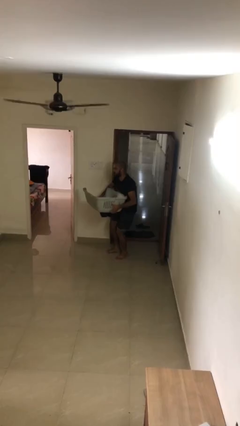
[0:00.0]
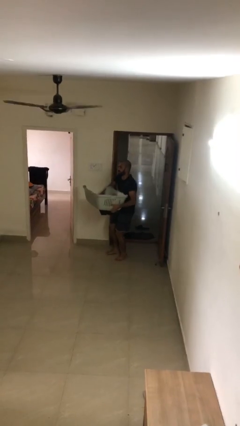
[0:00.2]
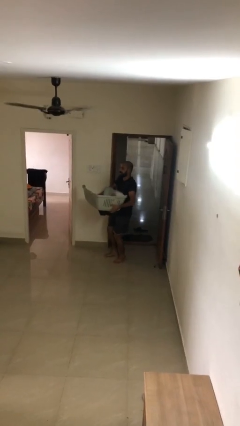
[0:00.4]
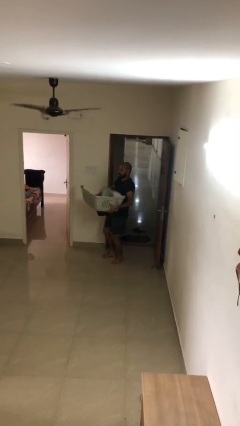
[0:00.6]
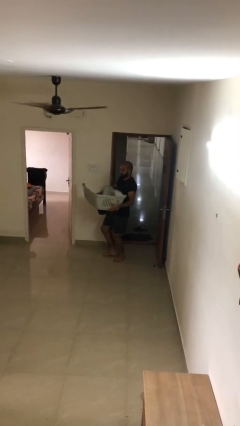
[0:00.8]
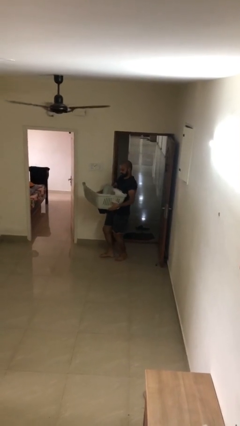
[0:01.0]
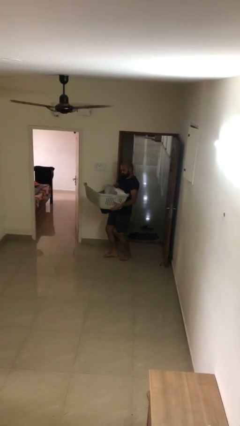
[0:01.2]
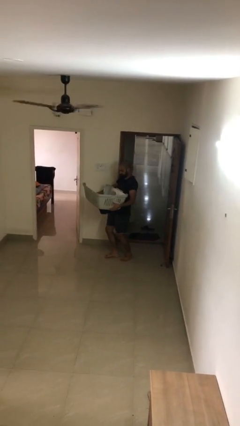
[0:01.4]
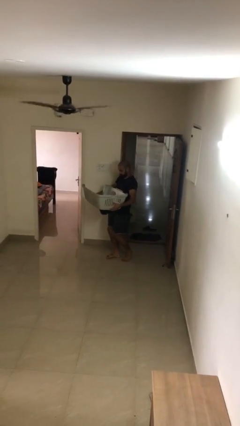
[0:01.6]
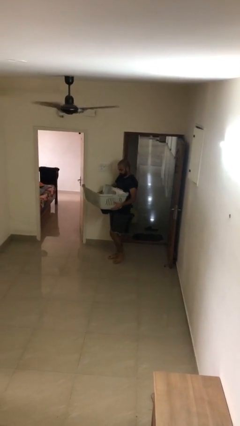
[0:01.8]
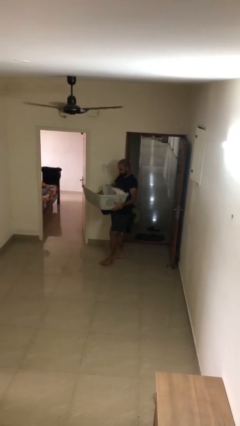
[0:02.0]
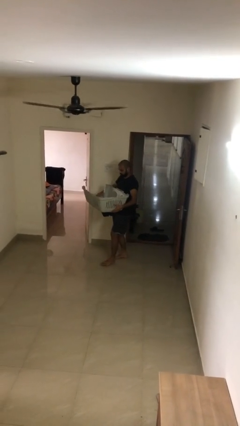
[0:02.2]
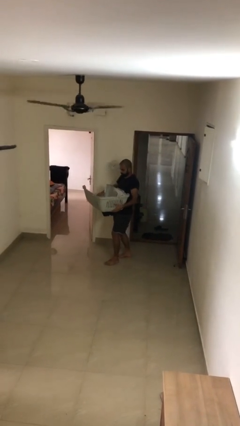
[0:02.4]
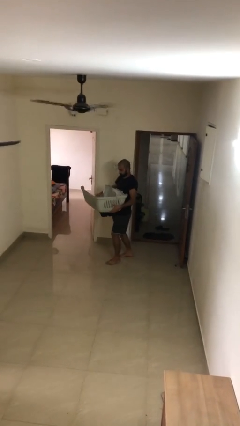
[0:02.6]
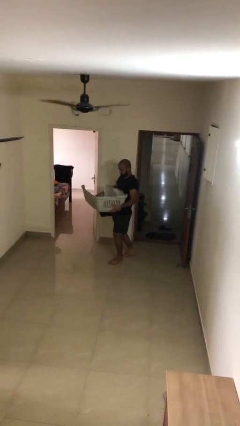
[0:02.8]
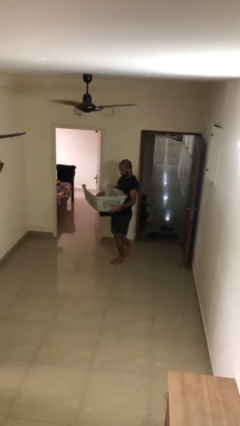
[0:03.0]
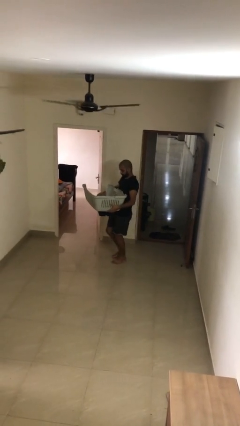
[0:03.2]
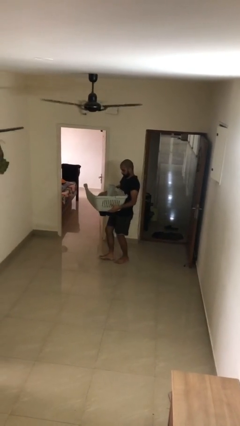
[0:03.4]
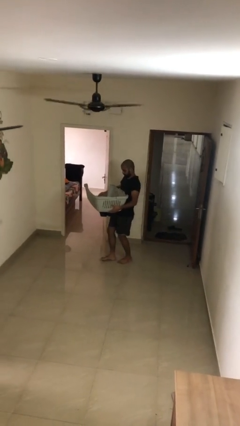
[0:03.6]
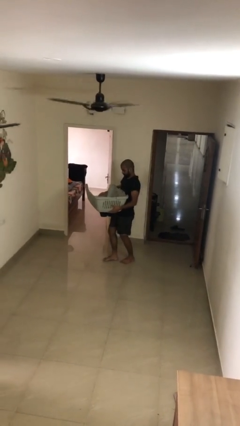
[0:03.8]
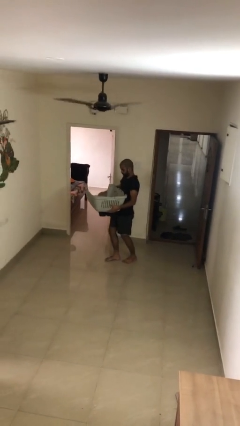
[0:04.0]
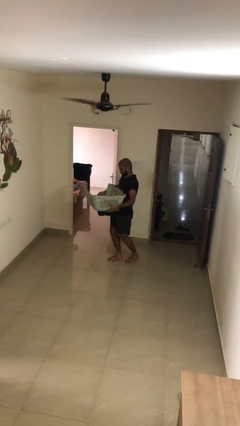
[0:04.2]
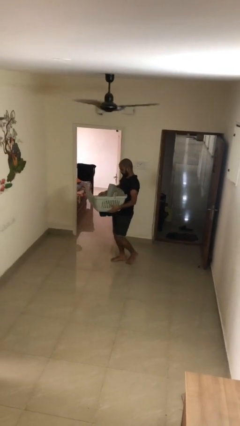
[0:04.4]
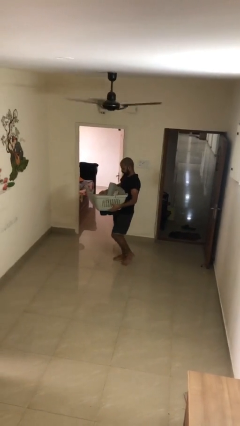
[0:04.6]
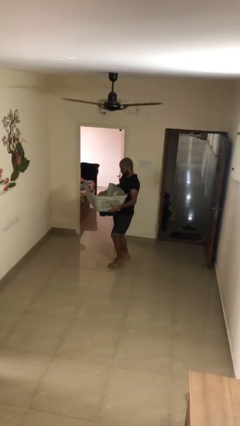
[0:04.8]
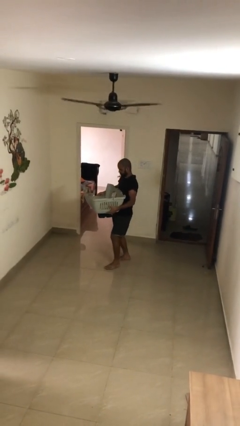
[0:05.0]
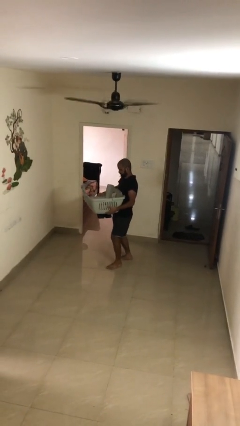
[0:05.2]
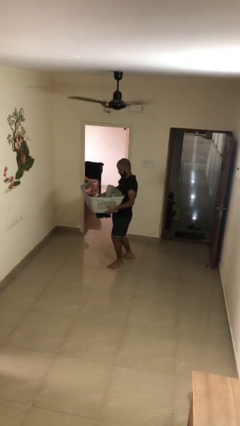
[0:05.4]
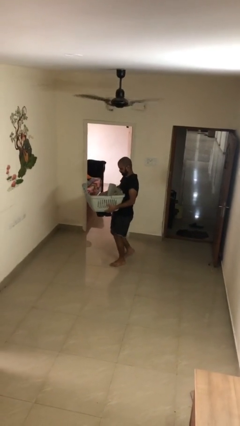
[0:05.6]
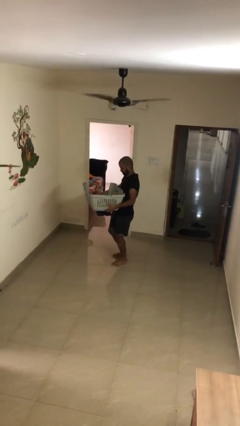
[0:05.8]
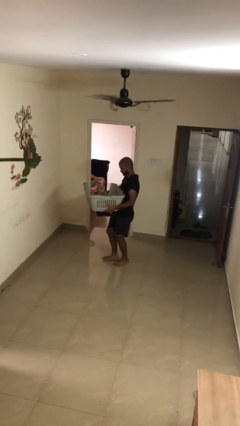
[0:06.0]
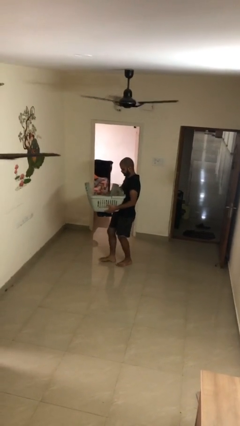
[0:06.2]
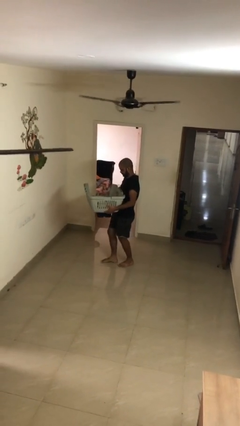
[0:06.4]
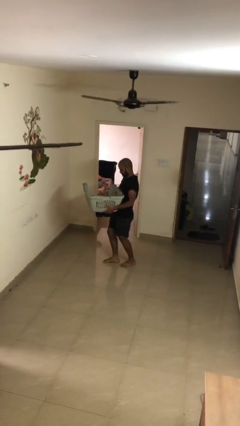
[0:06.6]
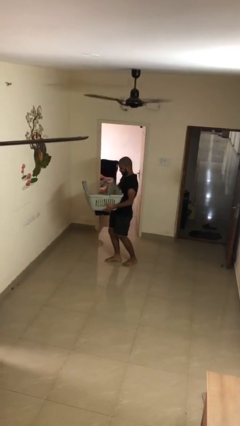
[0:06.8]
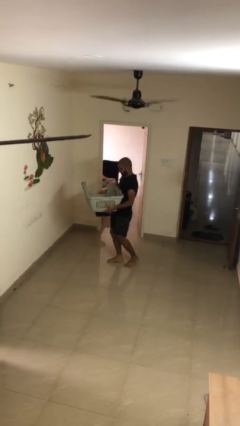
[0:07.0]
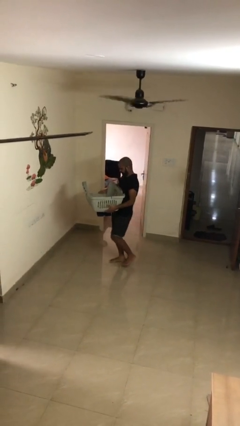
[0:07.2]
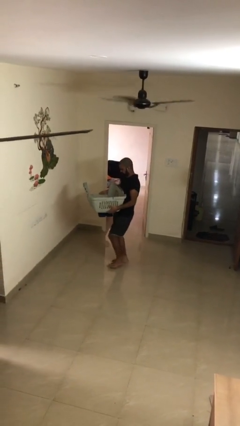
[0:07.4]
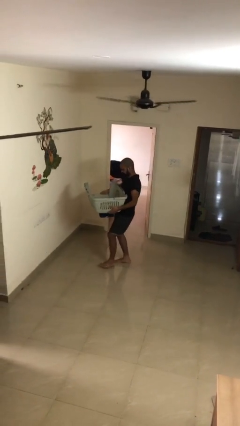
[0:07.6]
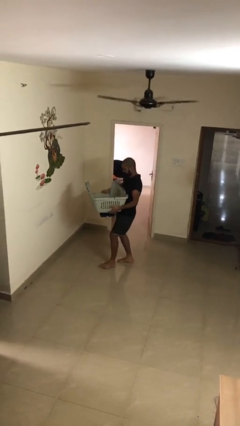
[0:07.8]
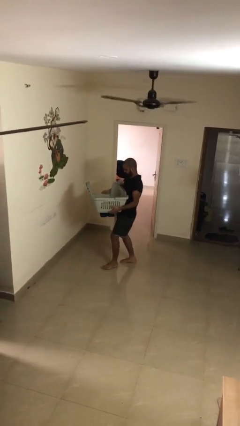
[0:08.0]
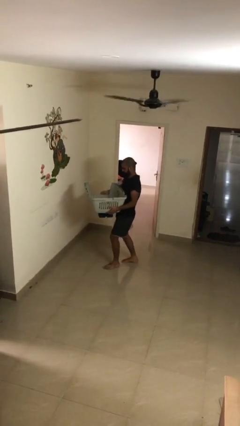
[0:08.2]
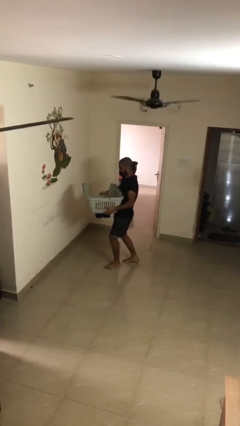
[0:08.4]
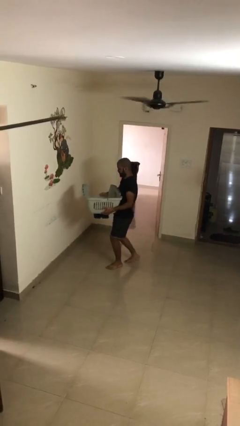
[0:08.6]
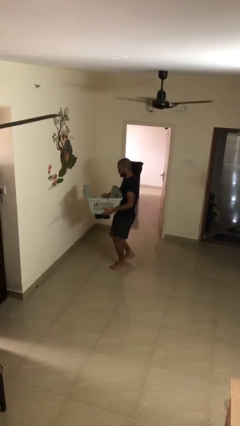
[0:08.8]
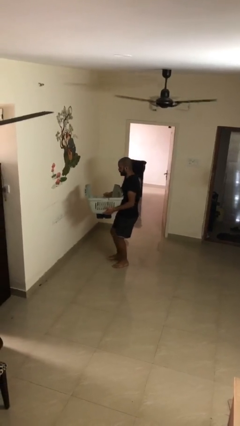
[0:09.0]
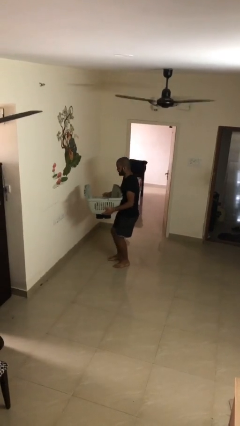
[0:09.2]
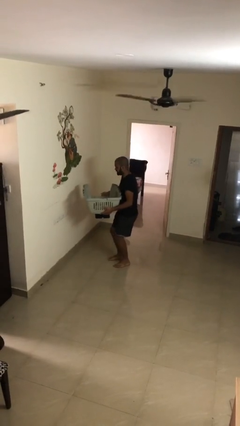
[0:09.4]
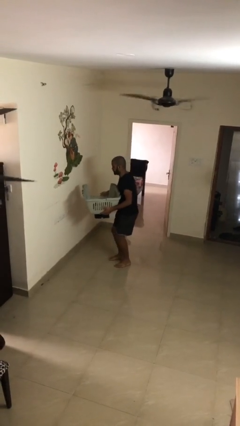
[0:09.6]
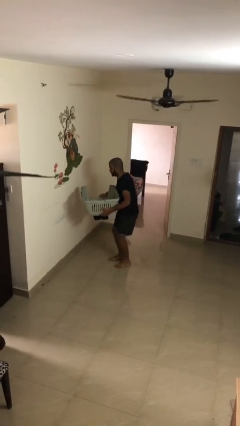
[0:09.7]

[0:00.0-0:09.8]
person carries heavy object

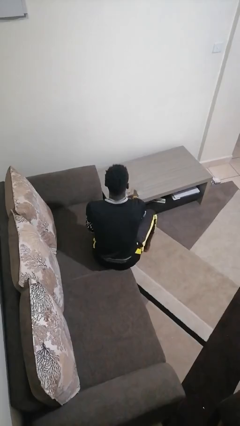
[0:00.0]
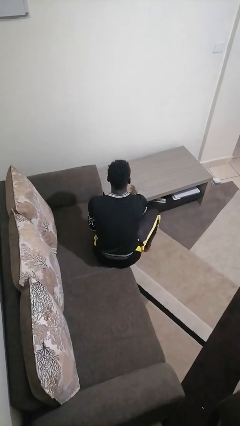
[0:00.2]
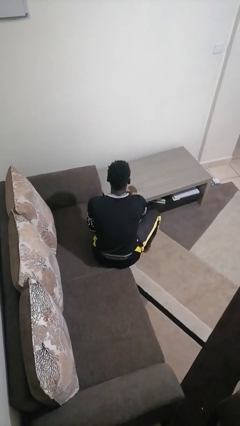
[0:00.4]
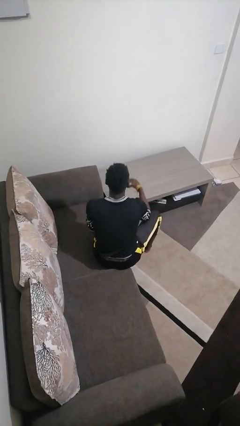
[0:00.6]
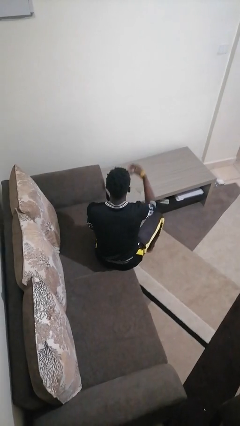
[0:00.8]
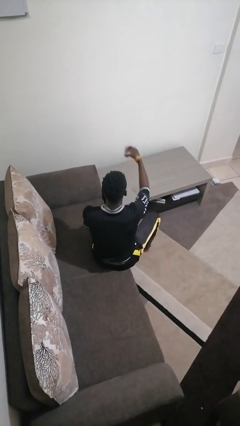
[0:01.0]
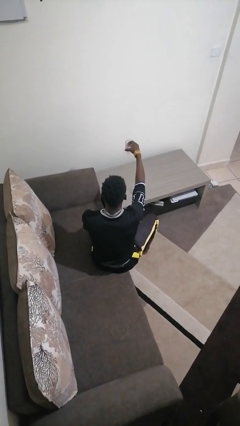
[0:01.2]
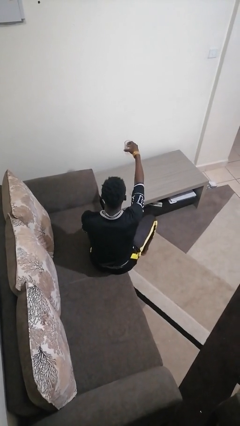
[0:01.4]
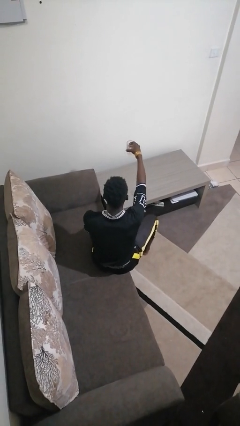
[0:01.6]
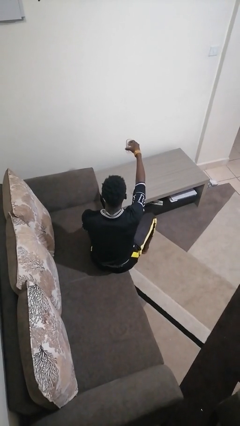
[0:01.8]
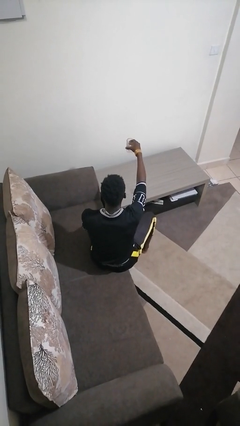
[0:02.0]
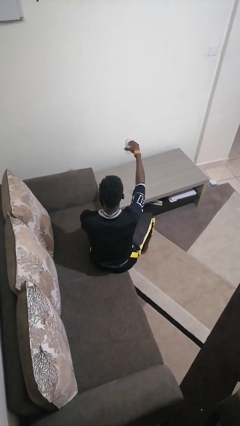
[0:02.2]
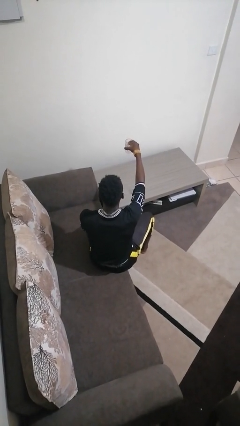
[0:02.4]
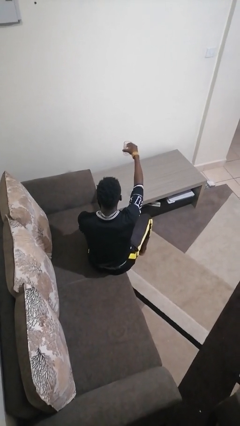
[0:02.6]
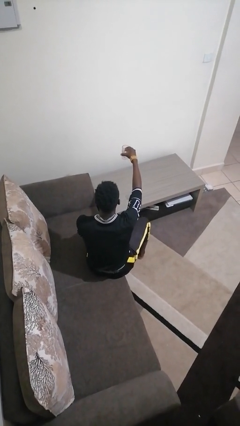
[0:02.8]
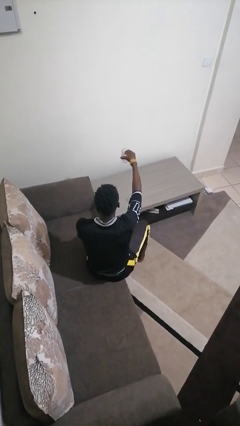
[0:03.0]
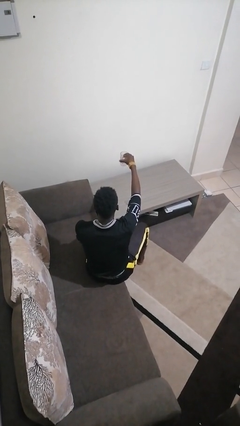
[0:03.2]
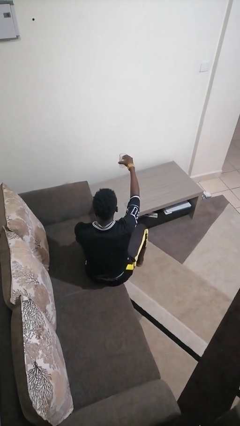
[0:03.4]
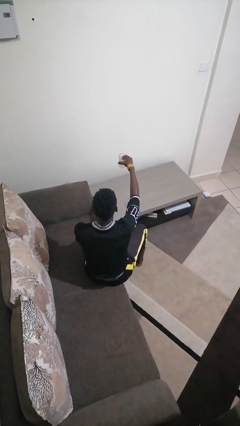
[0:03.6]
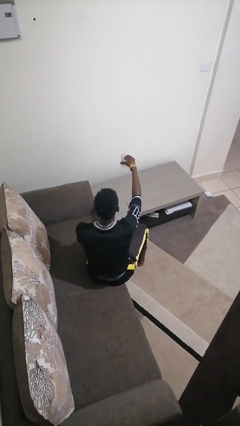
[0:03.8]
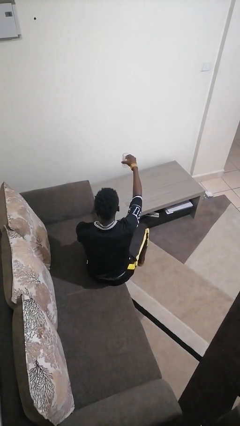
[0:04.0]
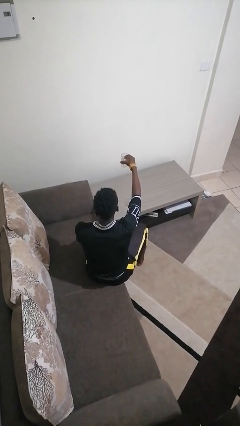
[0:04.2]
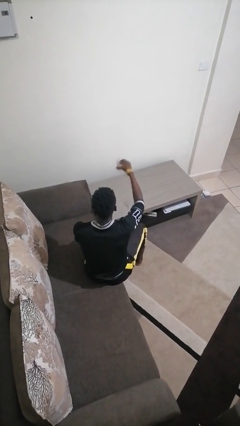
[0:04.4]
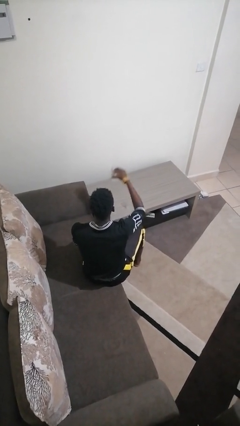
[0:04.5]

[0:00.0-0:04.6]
person picks up object from table

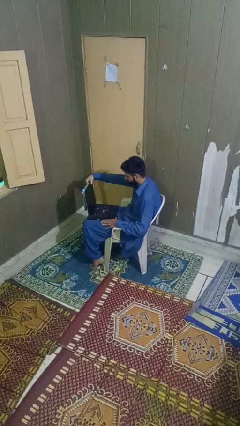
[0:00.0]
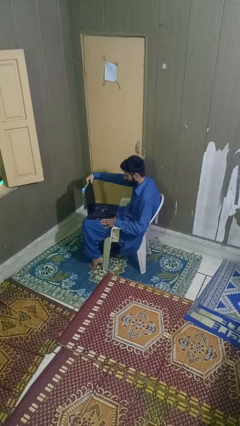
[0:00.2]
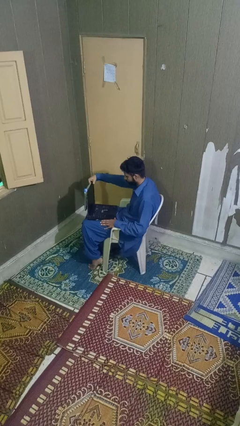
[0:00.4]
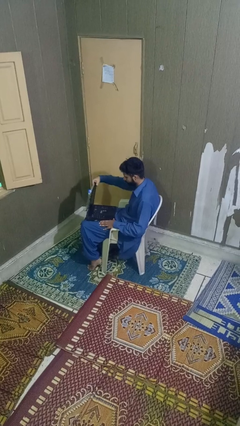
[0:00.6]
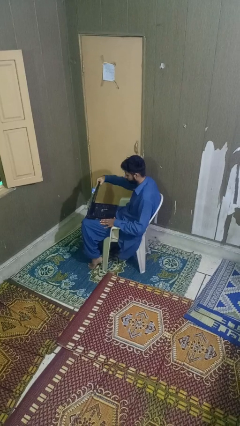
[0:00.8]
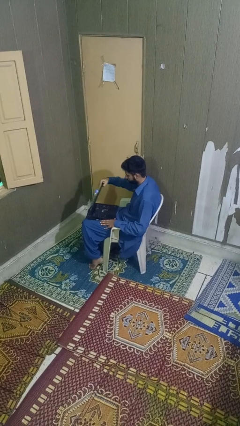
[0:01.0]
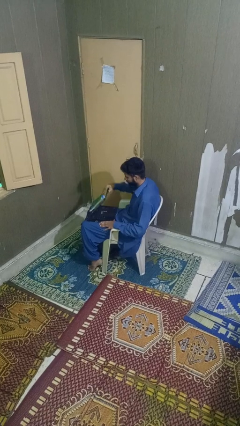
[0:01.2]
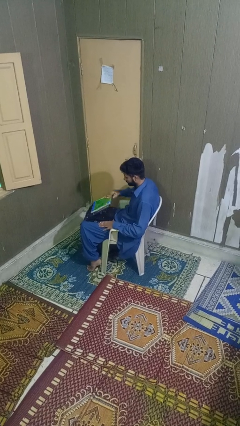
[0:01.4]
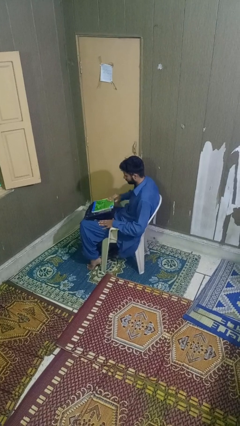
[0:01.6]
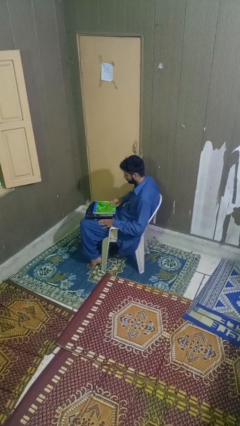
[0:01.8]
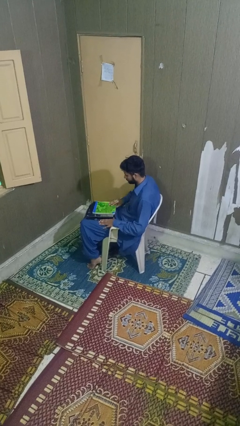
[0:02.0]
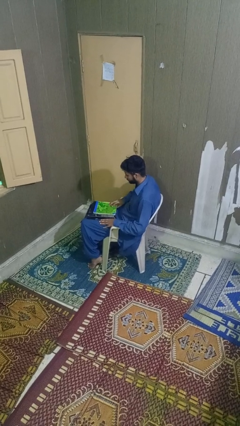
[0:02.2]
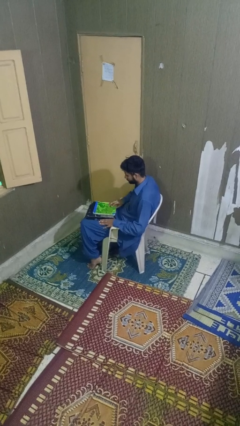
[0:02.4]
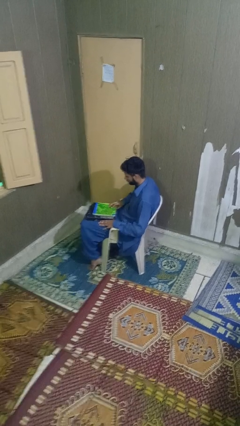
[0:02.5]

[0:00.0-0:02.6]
person closes laptop

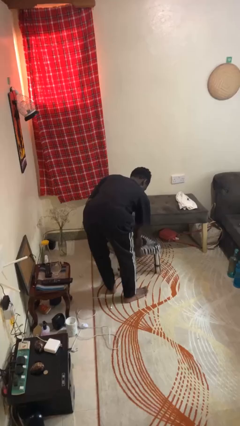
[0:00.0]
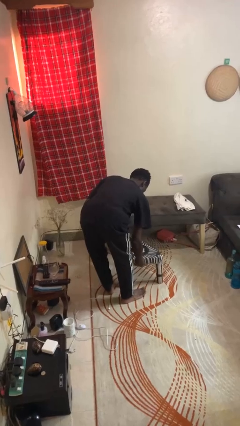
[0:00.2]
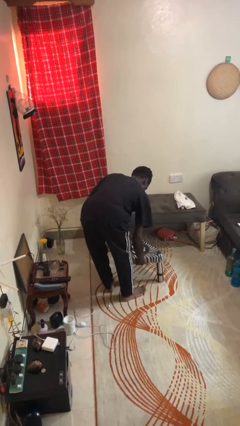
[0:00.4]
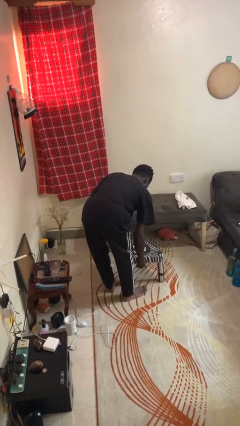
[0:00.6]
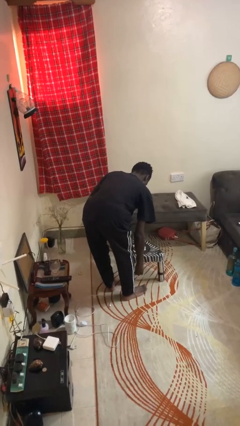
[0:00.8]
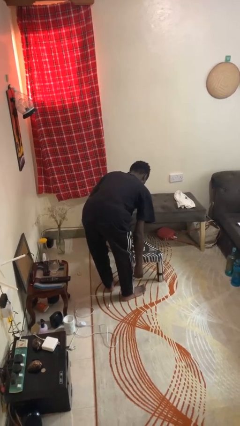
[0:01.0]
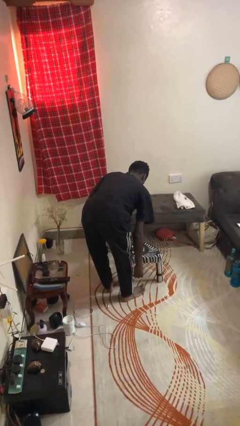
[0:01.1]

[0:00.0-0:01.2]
person pushes in chair
